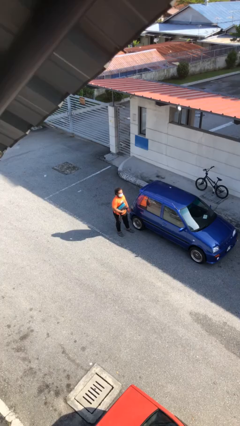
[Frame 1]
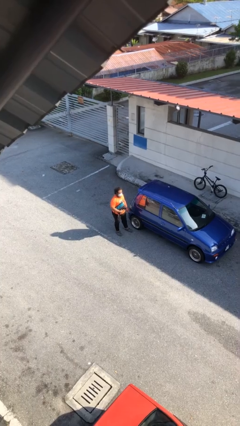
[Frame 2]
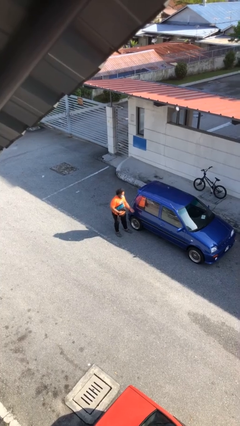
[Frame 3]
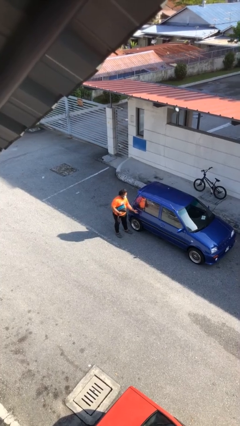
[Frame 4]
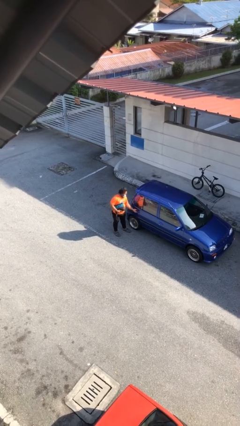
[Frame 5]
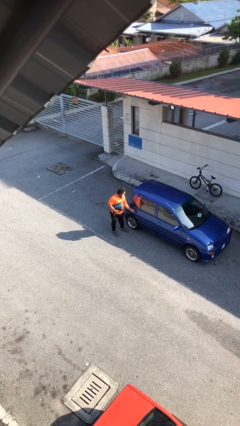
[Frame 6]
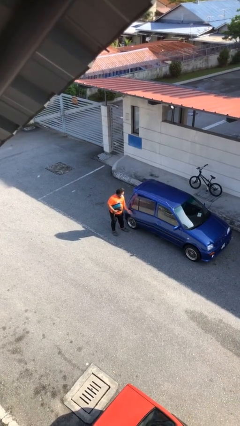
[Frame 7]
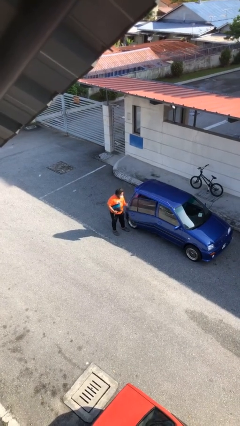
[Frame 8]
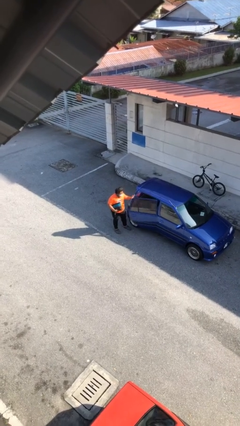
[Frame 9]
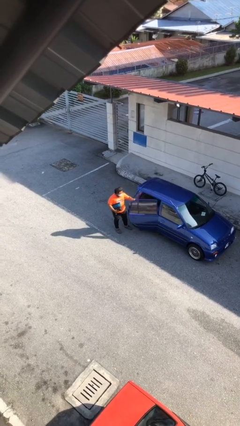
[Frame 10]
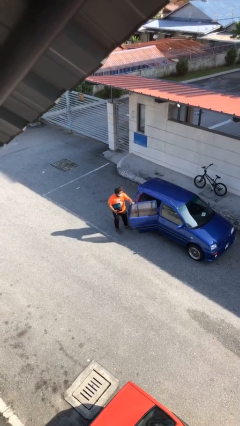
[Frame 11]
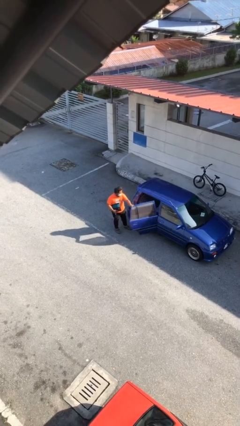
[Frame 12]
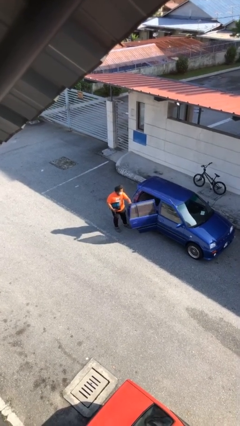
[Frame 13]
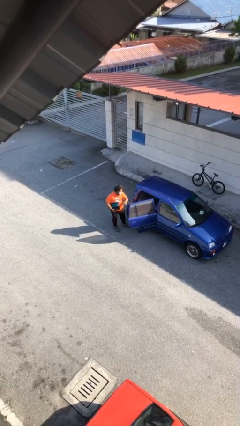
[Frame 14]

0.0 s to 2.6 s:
person opens car door

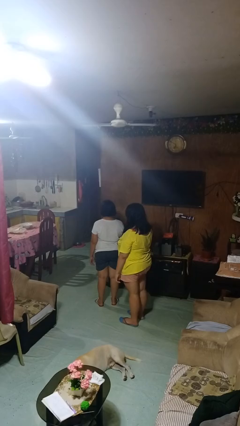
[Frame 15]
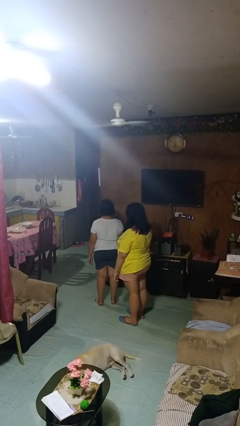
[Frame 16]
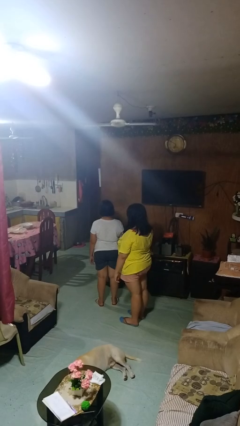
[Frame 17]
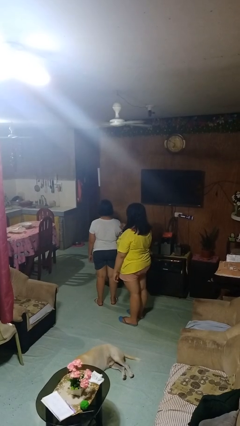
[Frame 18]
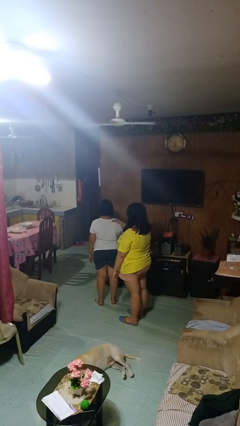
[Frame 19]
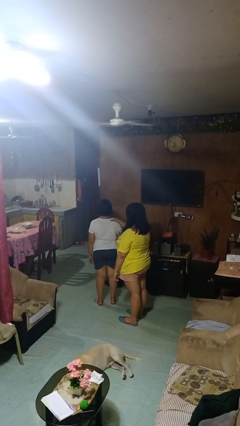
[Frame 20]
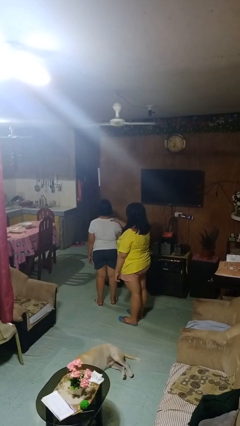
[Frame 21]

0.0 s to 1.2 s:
person grabs person by shoulder

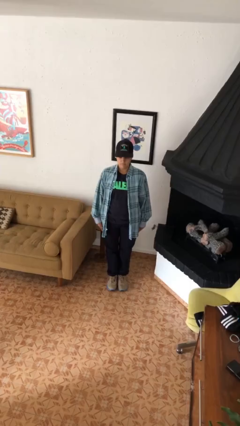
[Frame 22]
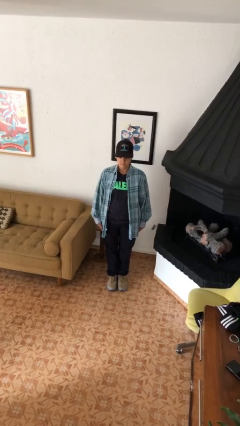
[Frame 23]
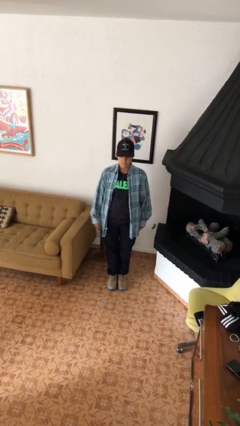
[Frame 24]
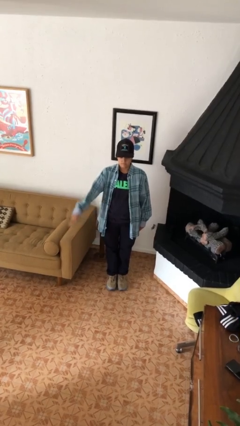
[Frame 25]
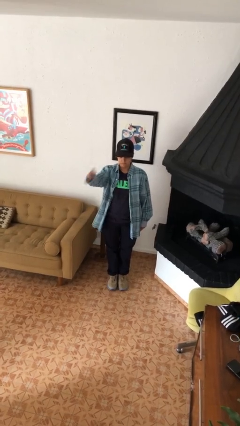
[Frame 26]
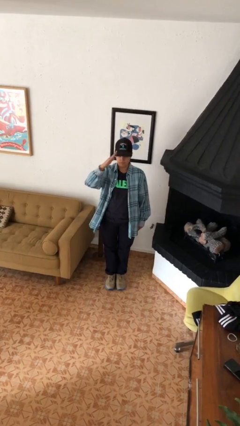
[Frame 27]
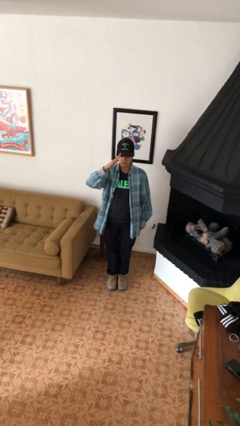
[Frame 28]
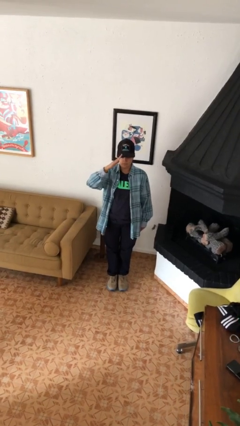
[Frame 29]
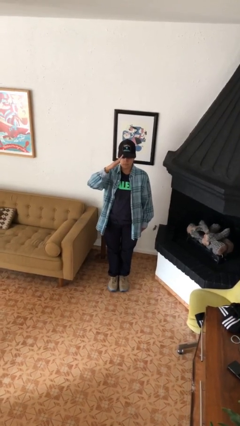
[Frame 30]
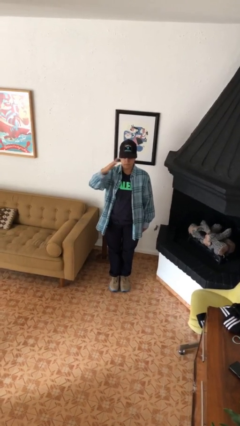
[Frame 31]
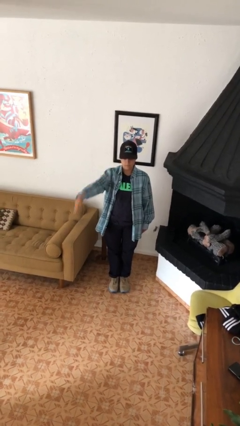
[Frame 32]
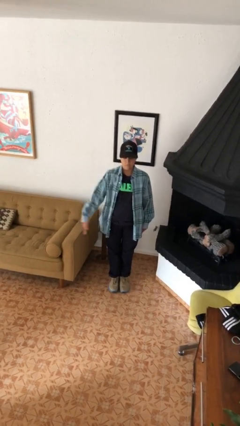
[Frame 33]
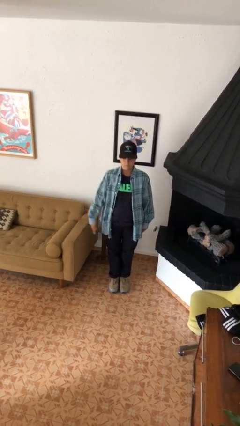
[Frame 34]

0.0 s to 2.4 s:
person salutes

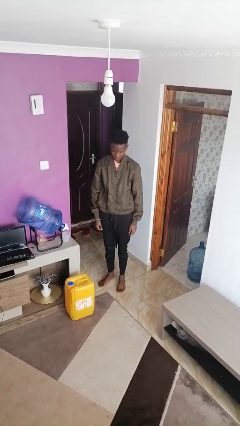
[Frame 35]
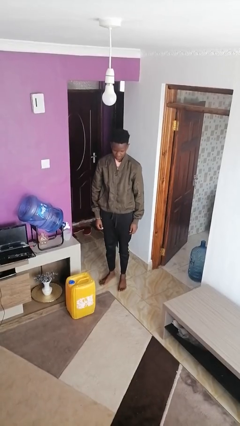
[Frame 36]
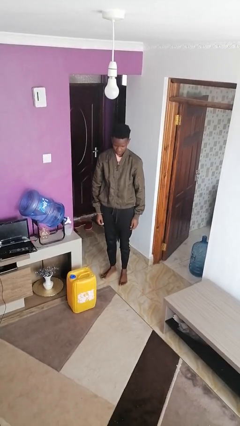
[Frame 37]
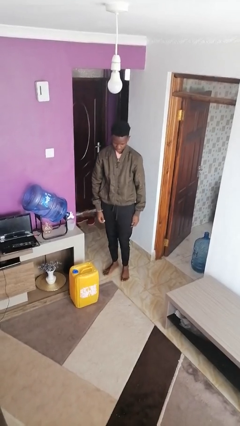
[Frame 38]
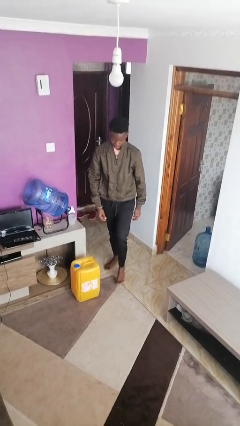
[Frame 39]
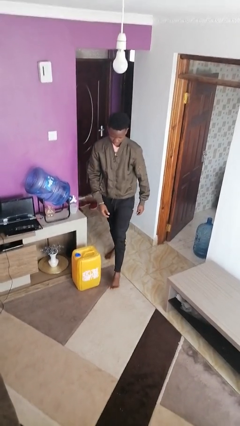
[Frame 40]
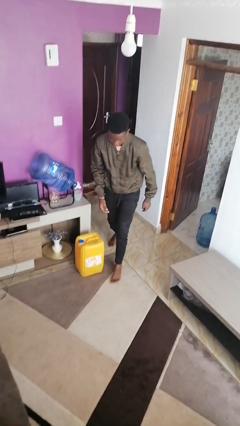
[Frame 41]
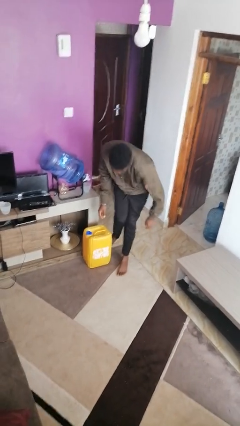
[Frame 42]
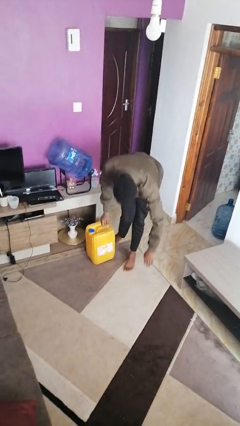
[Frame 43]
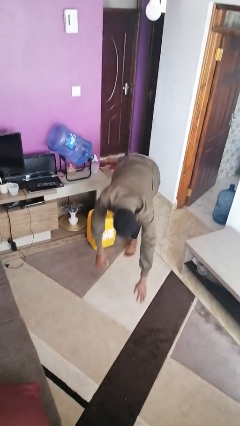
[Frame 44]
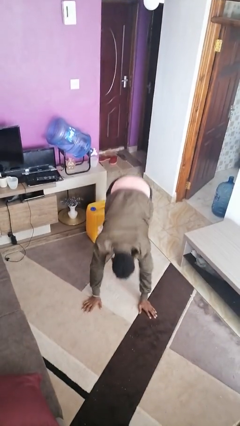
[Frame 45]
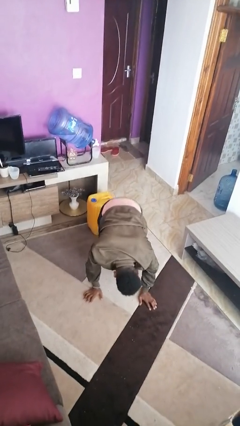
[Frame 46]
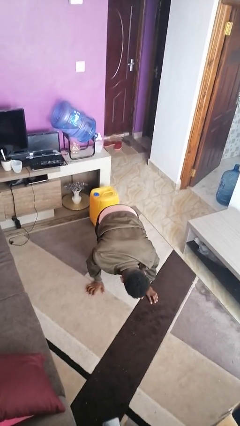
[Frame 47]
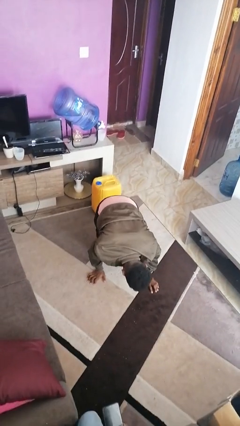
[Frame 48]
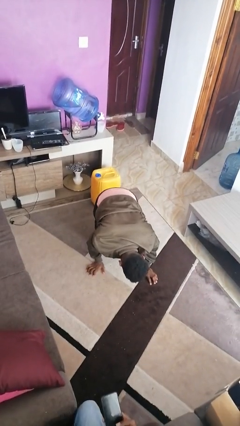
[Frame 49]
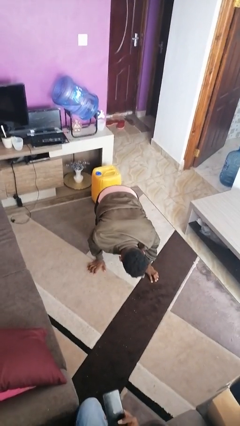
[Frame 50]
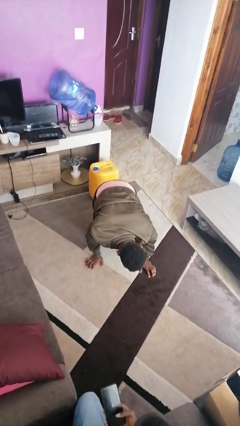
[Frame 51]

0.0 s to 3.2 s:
person trips on object on floor

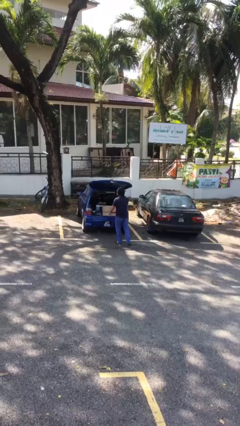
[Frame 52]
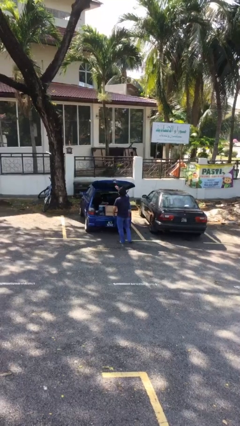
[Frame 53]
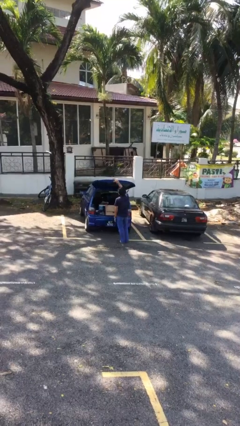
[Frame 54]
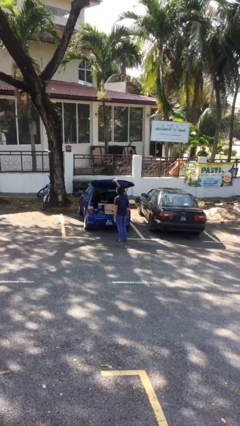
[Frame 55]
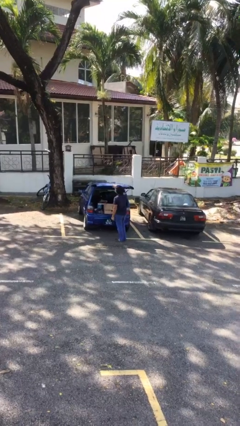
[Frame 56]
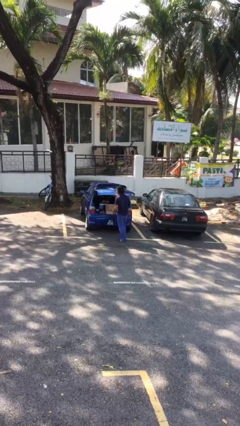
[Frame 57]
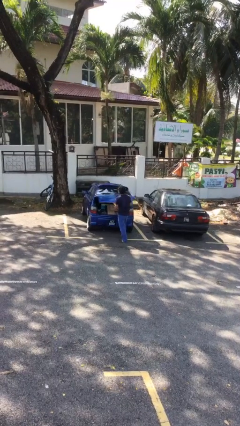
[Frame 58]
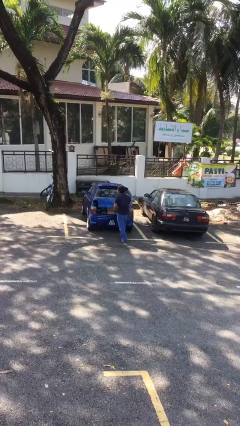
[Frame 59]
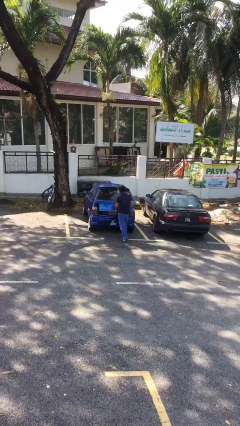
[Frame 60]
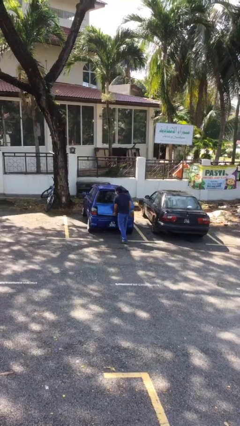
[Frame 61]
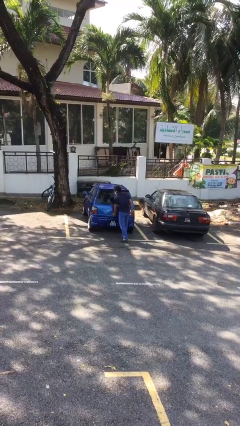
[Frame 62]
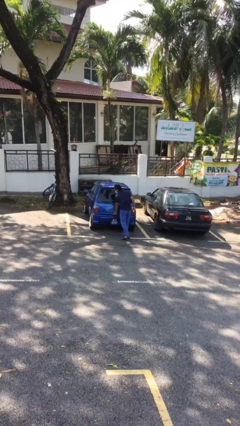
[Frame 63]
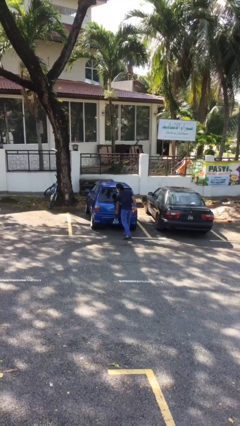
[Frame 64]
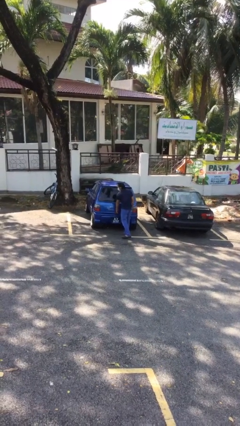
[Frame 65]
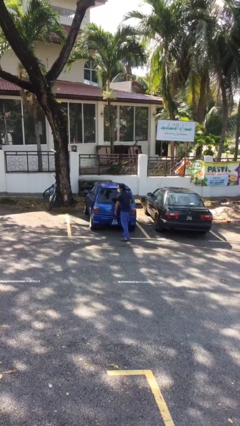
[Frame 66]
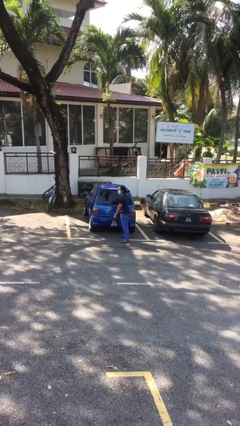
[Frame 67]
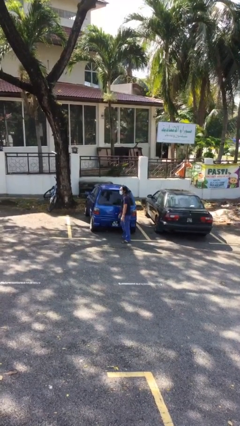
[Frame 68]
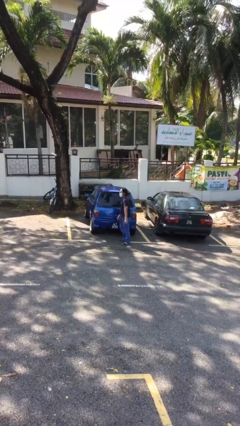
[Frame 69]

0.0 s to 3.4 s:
person closes car trunk

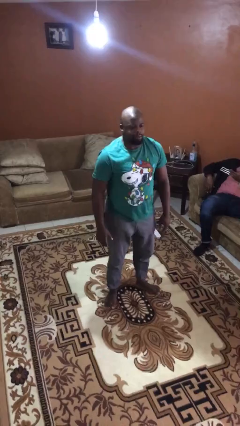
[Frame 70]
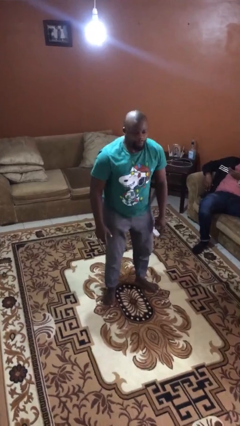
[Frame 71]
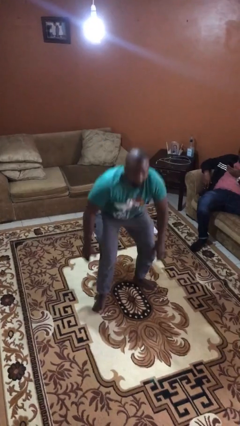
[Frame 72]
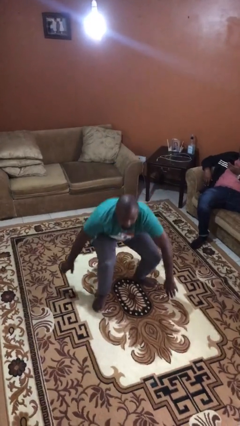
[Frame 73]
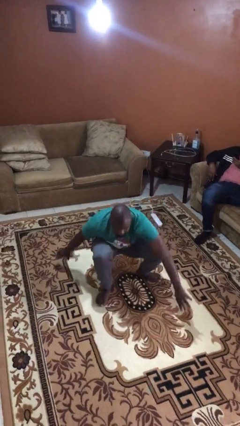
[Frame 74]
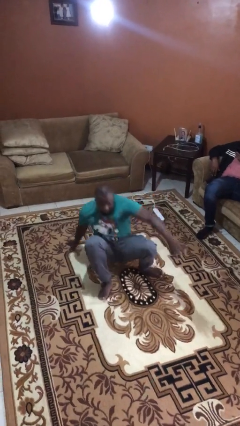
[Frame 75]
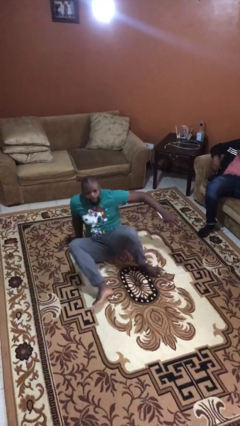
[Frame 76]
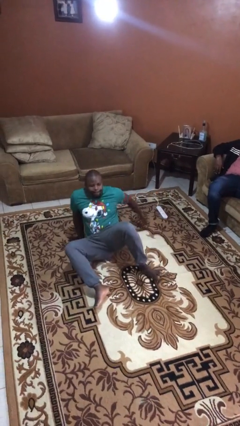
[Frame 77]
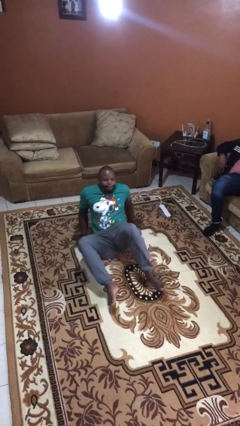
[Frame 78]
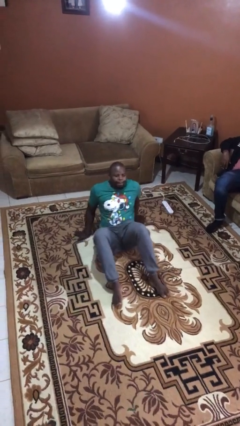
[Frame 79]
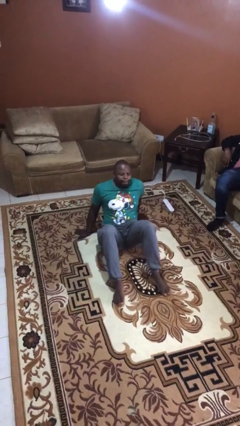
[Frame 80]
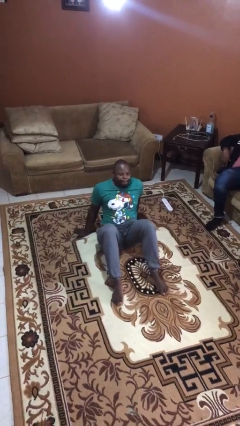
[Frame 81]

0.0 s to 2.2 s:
person sits down

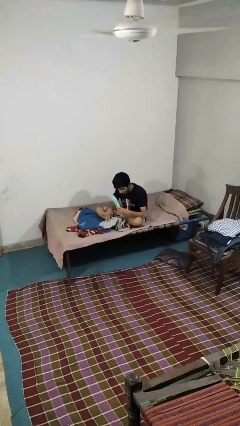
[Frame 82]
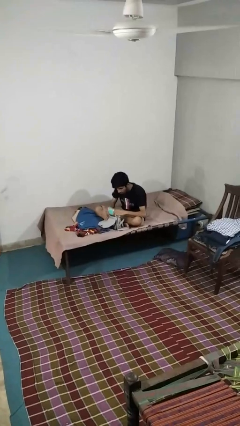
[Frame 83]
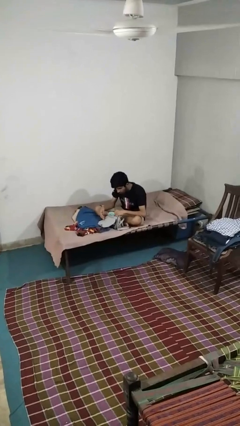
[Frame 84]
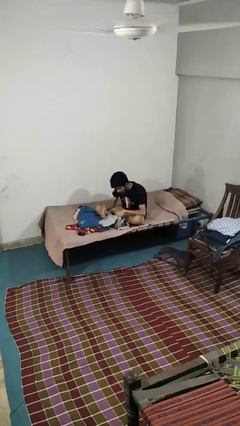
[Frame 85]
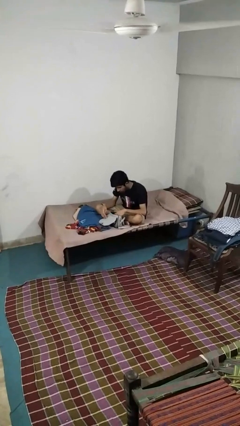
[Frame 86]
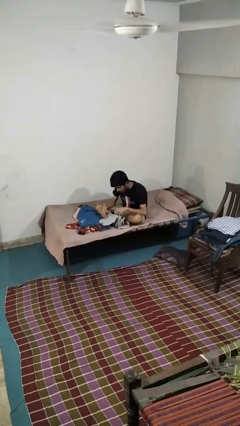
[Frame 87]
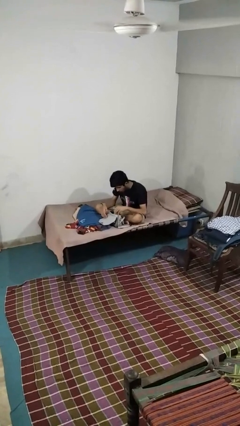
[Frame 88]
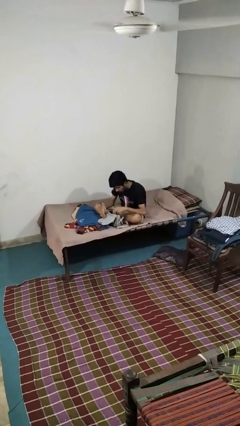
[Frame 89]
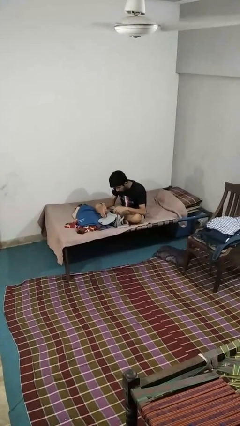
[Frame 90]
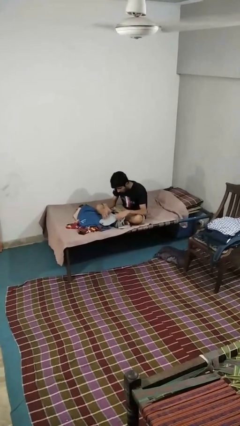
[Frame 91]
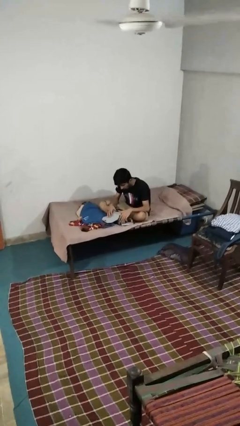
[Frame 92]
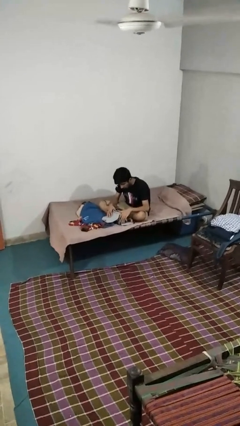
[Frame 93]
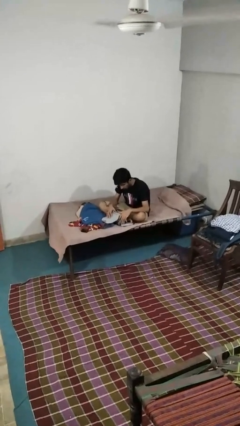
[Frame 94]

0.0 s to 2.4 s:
person puts object into purse
